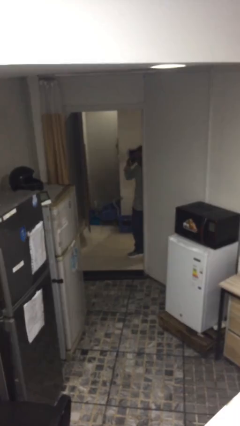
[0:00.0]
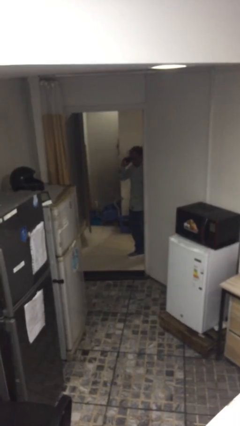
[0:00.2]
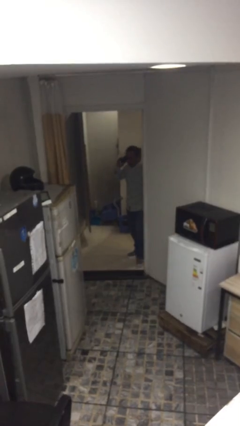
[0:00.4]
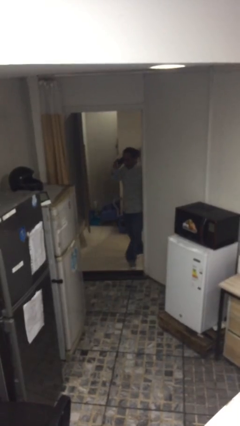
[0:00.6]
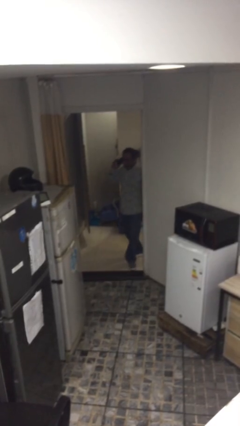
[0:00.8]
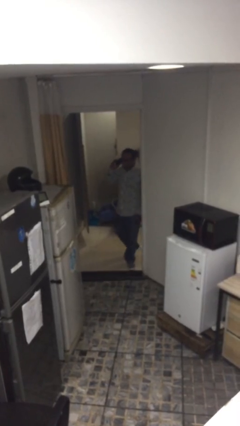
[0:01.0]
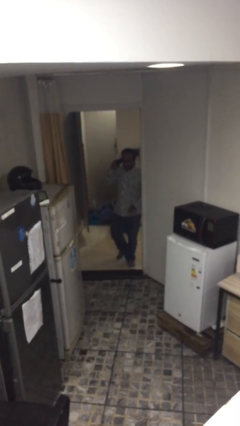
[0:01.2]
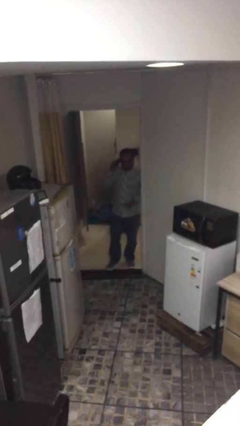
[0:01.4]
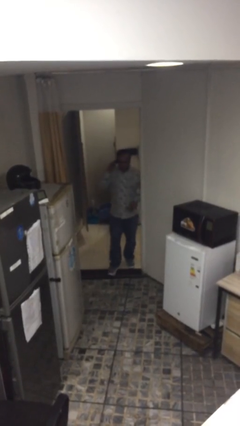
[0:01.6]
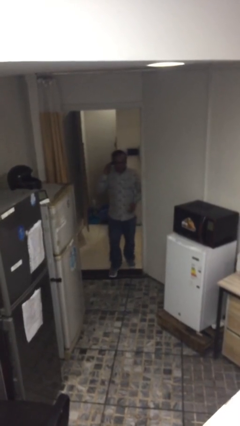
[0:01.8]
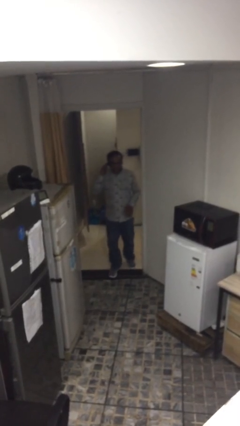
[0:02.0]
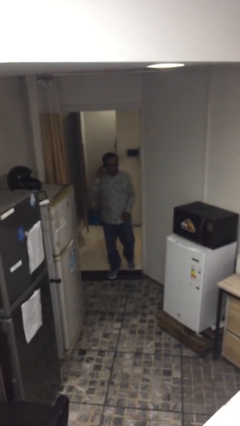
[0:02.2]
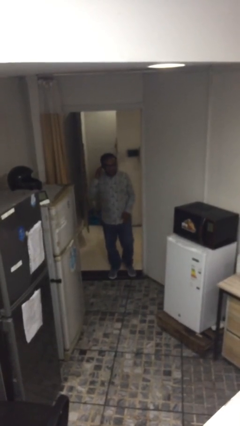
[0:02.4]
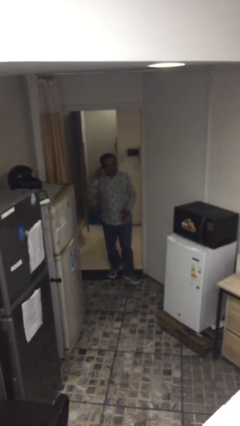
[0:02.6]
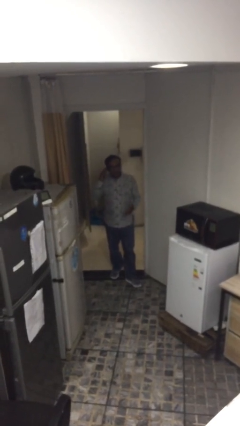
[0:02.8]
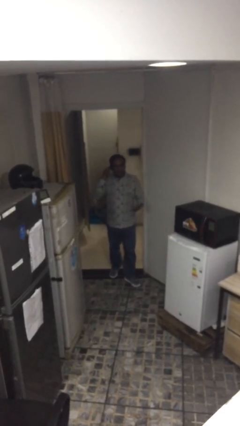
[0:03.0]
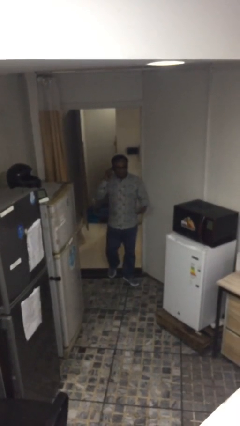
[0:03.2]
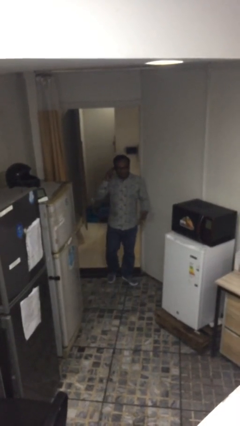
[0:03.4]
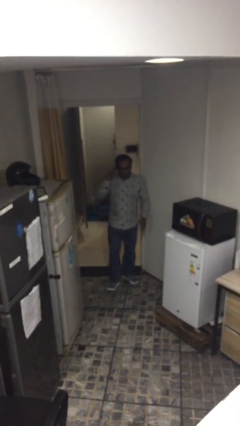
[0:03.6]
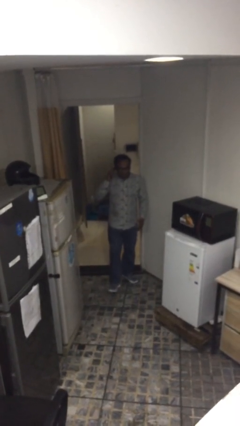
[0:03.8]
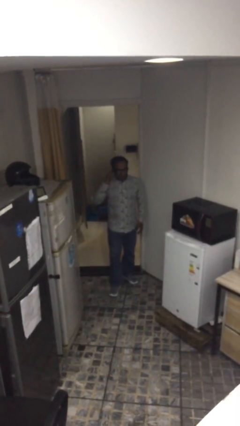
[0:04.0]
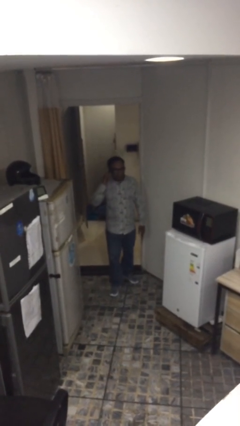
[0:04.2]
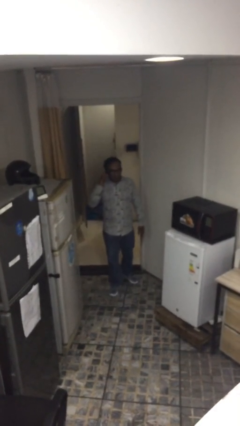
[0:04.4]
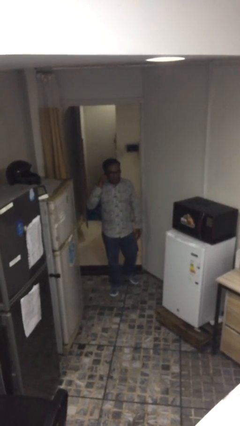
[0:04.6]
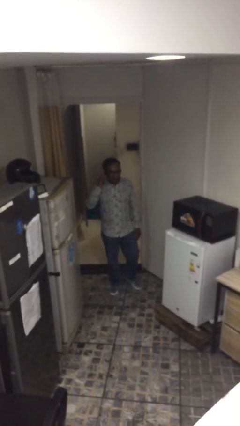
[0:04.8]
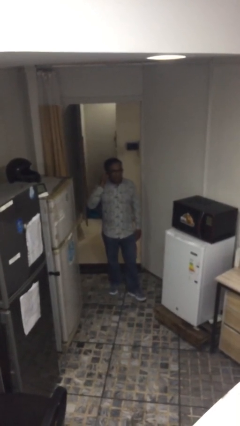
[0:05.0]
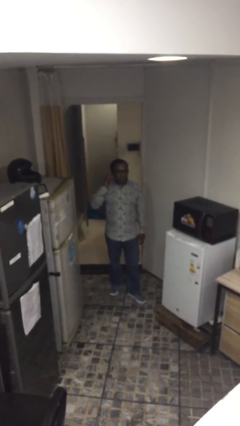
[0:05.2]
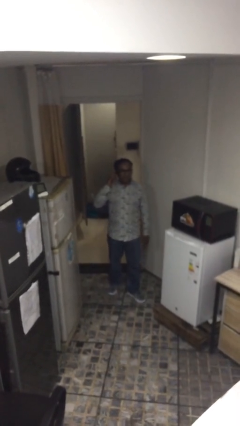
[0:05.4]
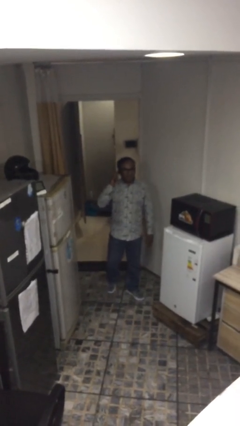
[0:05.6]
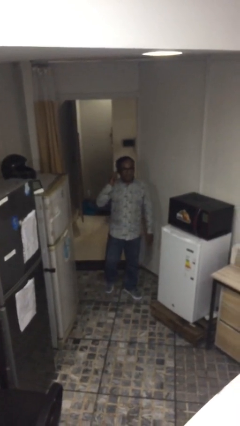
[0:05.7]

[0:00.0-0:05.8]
person enters scene through structure

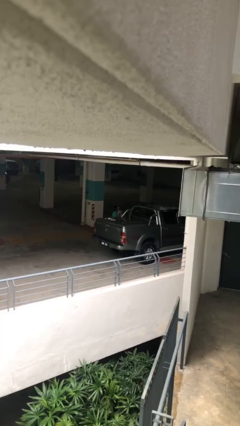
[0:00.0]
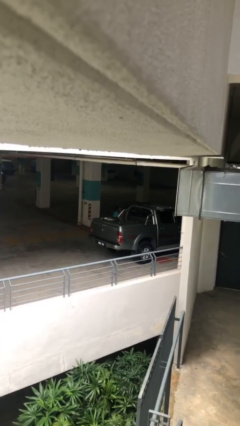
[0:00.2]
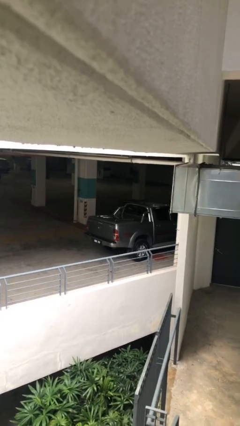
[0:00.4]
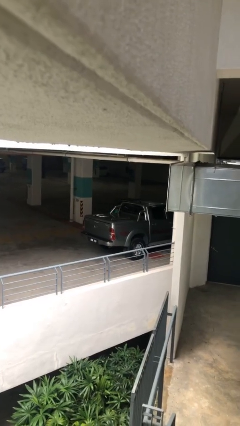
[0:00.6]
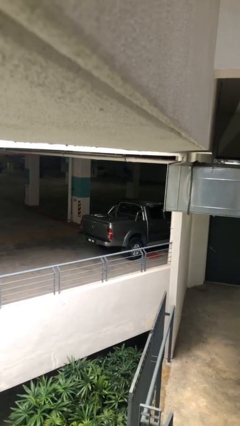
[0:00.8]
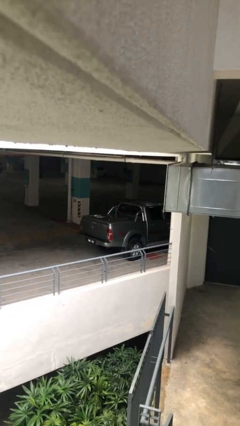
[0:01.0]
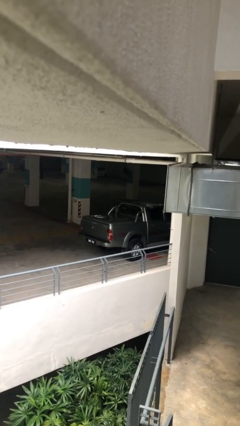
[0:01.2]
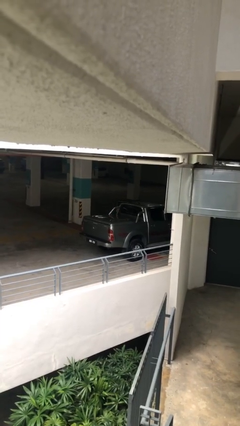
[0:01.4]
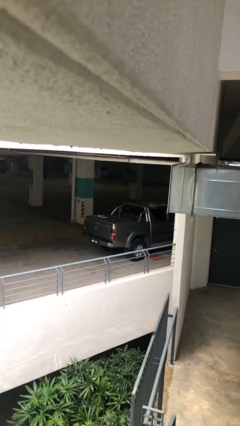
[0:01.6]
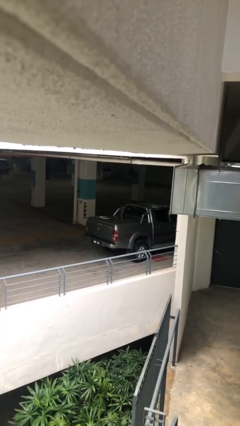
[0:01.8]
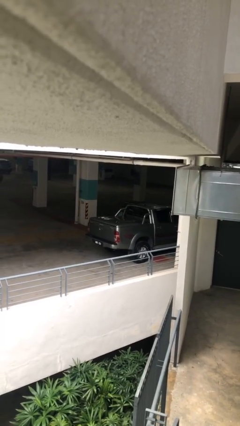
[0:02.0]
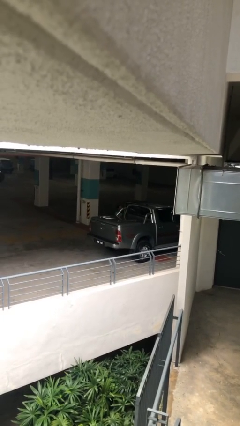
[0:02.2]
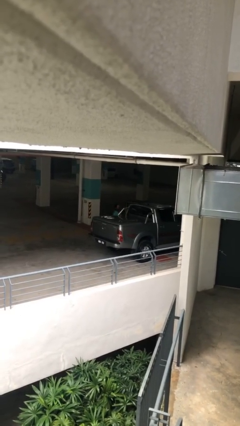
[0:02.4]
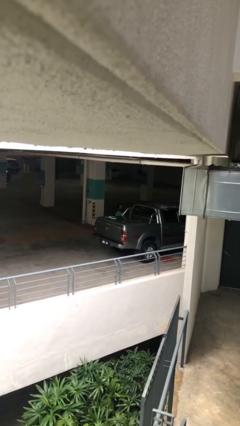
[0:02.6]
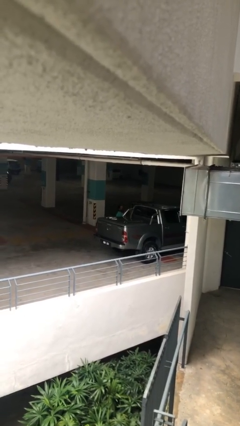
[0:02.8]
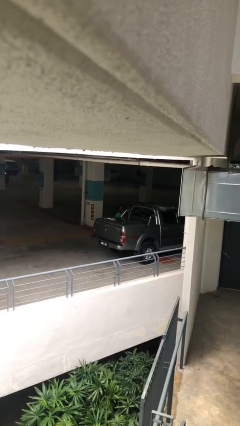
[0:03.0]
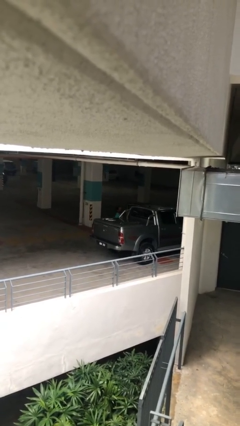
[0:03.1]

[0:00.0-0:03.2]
person loads car

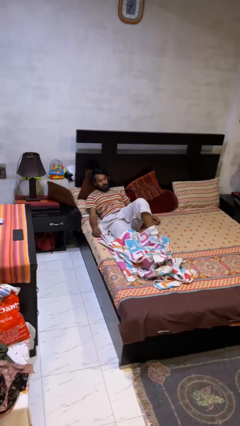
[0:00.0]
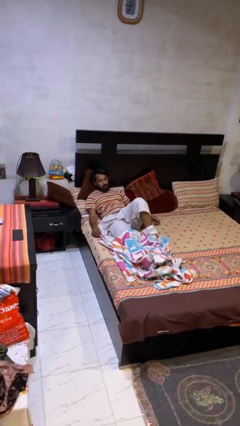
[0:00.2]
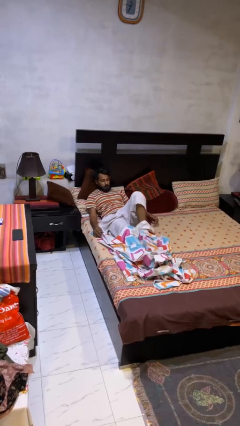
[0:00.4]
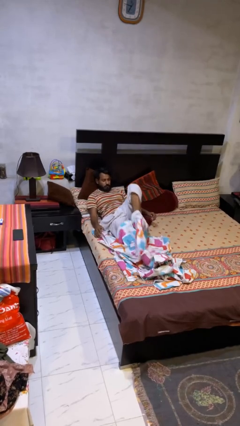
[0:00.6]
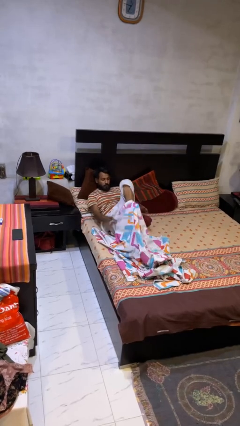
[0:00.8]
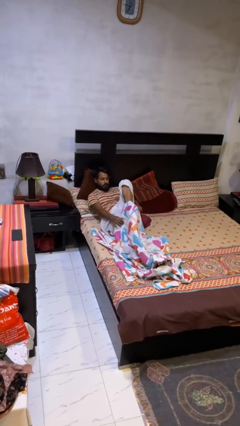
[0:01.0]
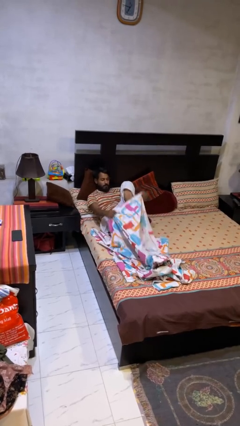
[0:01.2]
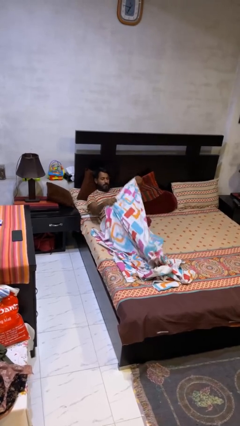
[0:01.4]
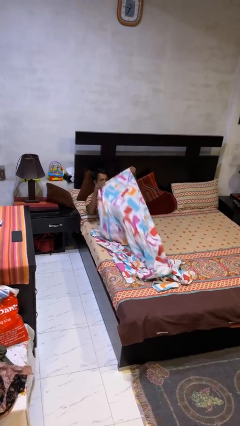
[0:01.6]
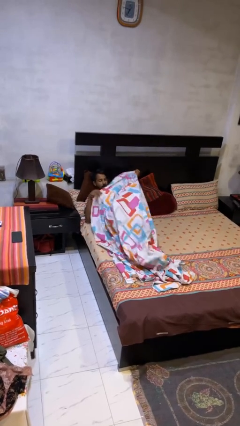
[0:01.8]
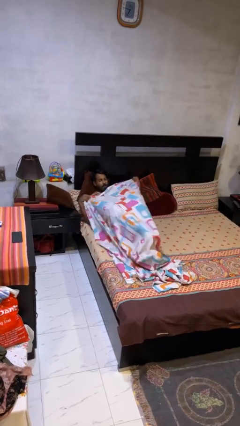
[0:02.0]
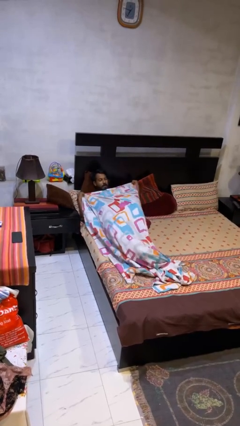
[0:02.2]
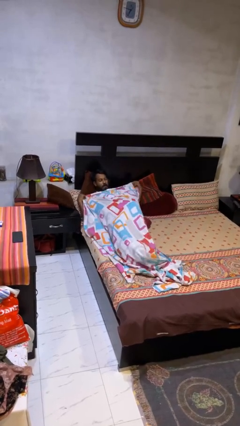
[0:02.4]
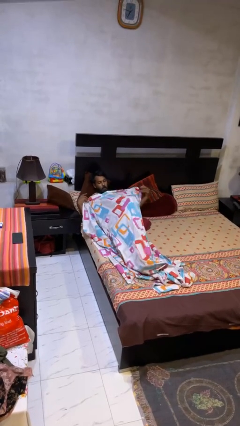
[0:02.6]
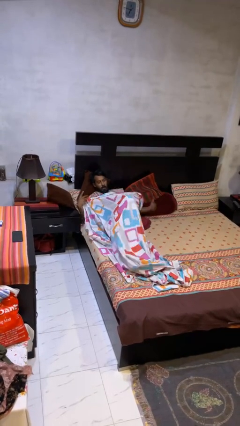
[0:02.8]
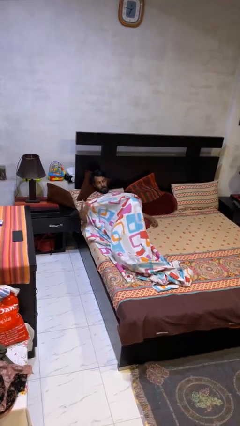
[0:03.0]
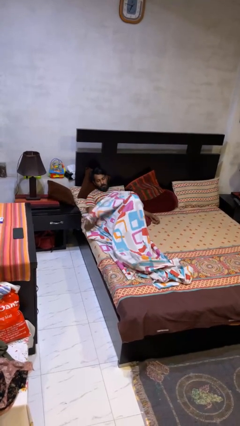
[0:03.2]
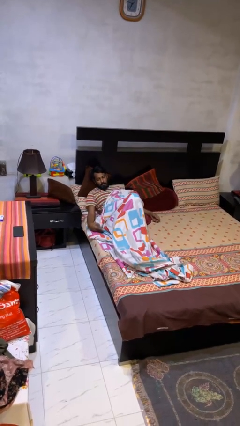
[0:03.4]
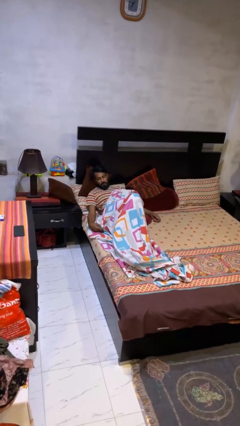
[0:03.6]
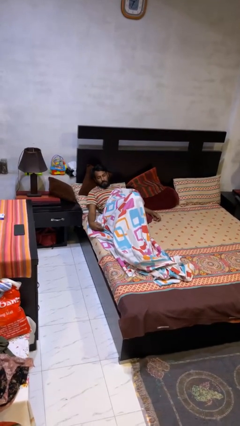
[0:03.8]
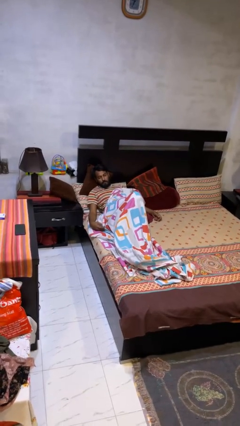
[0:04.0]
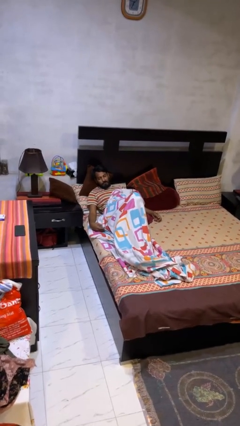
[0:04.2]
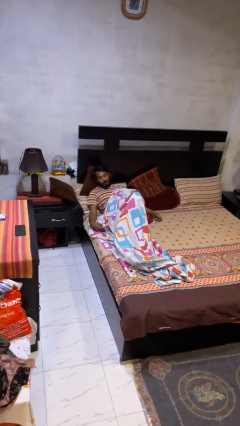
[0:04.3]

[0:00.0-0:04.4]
person covers with bedsheets

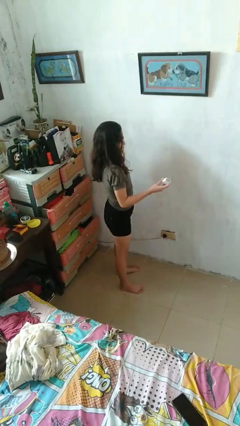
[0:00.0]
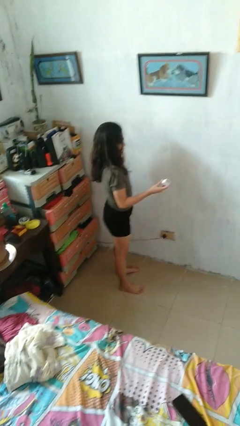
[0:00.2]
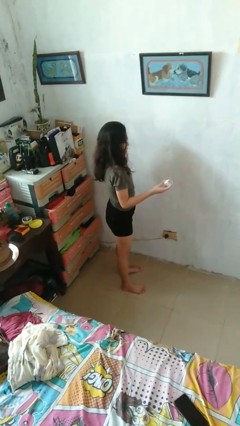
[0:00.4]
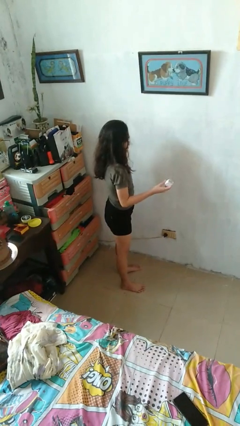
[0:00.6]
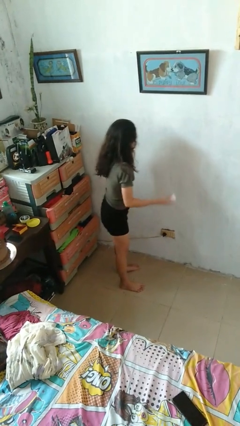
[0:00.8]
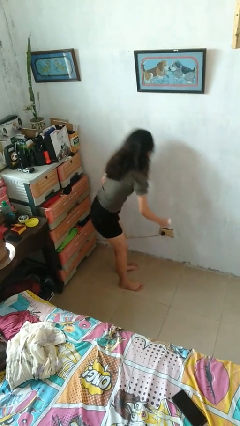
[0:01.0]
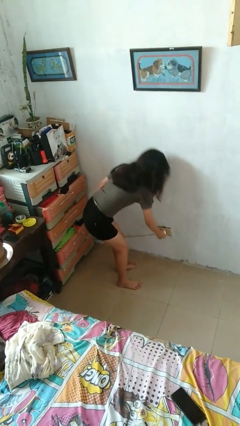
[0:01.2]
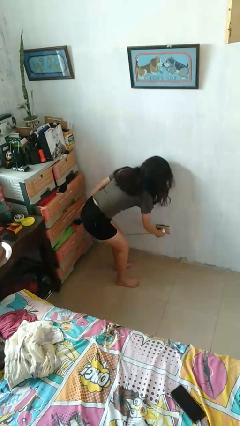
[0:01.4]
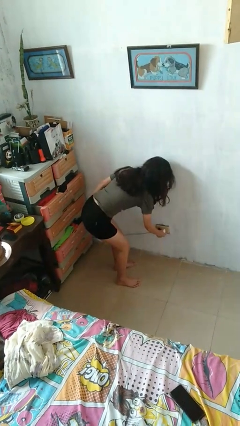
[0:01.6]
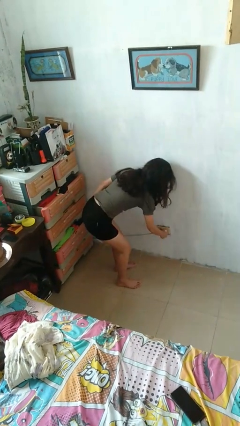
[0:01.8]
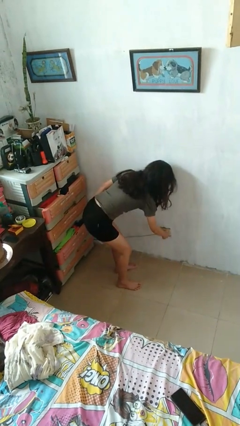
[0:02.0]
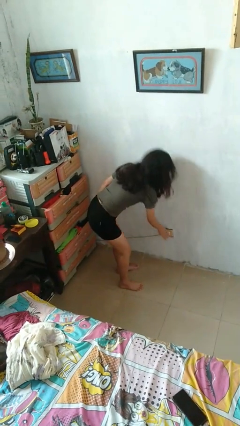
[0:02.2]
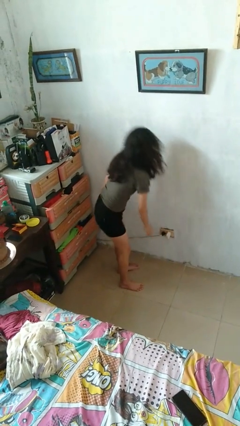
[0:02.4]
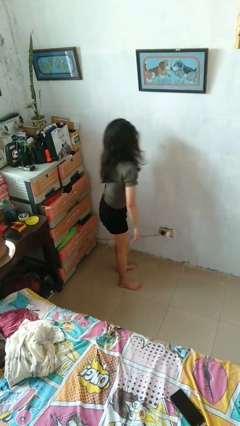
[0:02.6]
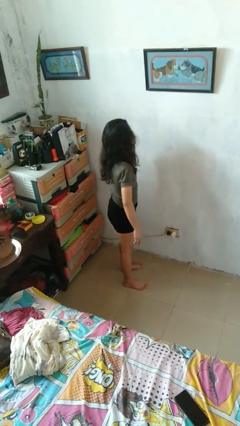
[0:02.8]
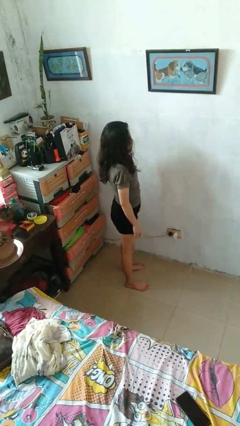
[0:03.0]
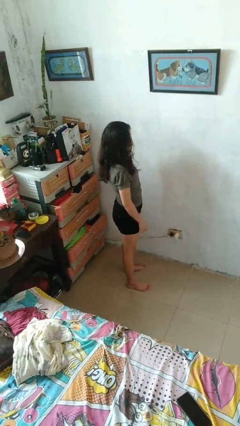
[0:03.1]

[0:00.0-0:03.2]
person plugs into electrical socket

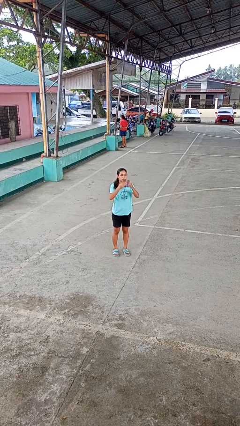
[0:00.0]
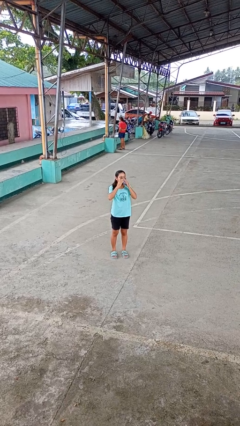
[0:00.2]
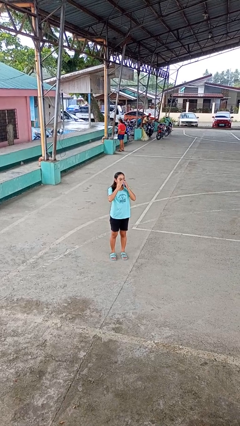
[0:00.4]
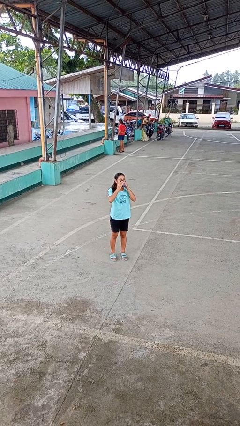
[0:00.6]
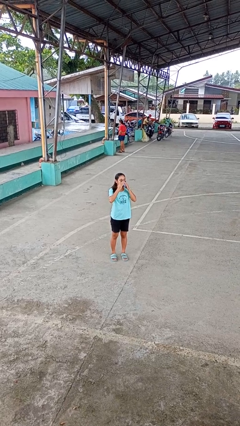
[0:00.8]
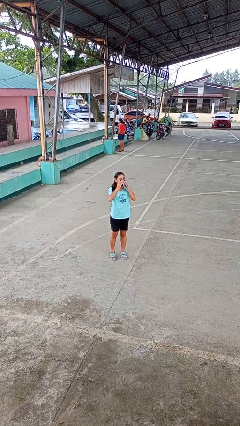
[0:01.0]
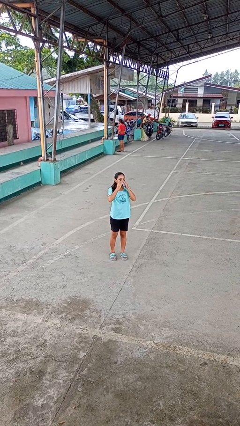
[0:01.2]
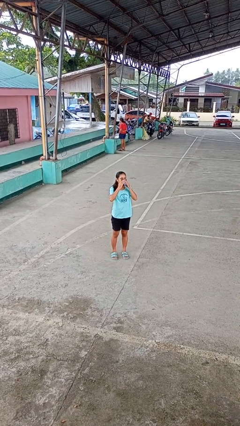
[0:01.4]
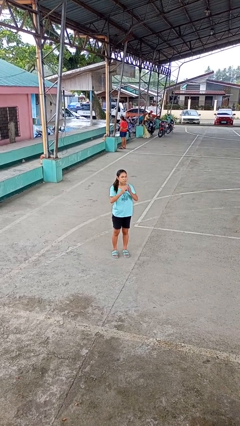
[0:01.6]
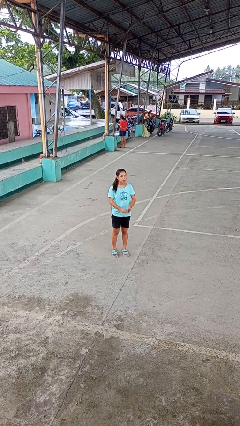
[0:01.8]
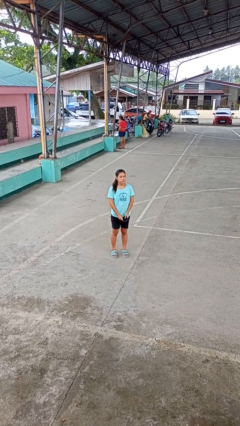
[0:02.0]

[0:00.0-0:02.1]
person blows nose
